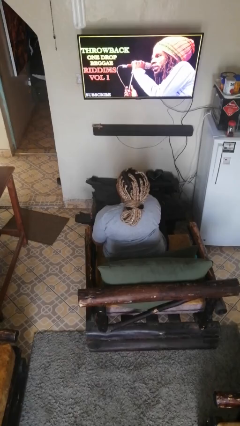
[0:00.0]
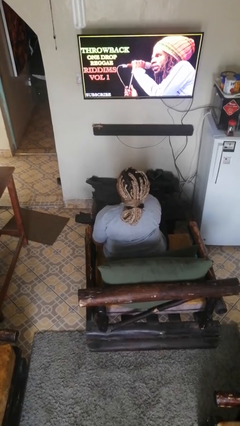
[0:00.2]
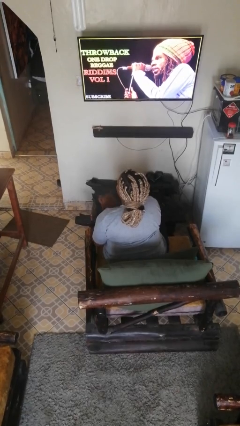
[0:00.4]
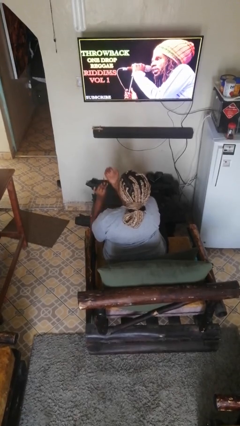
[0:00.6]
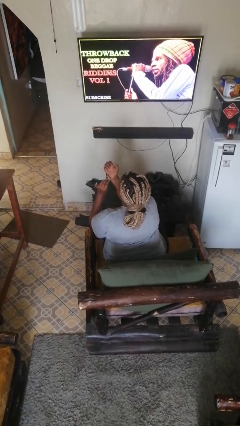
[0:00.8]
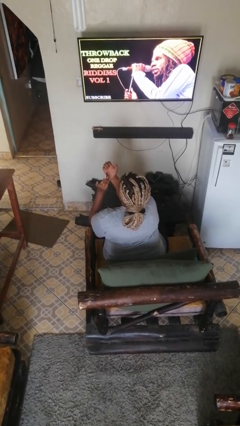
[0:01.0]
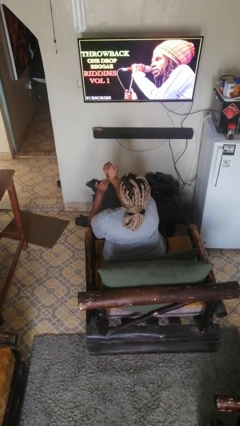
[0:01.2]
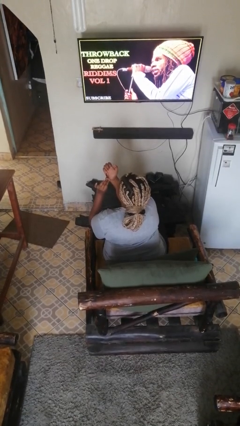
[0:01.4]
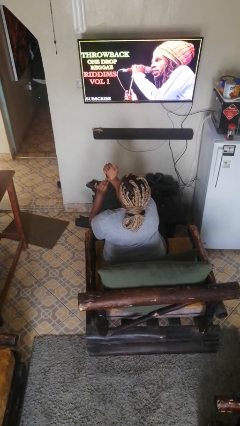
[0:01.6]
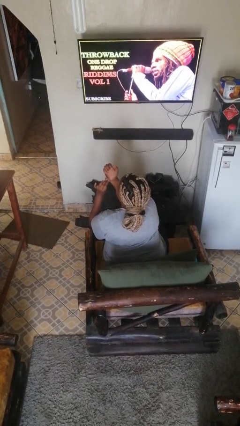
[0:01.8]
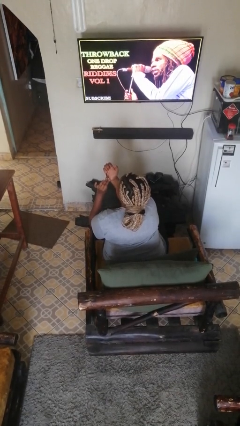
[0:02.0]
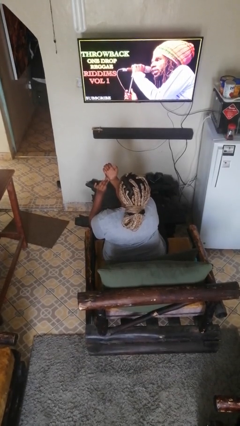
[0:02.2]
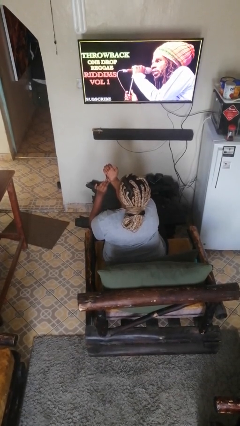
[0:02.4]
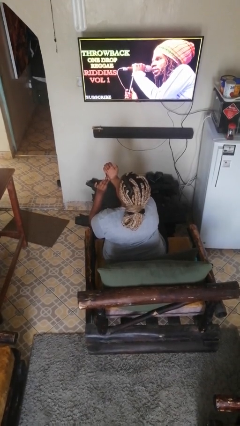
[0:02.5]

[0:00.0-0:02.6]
person paints fingernails

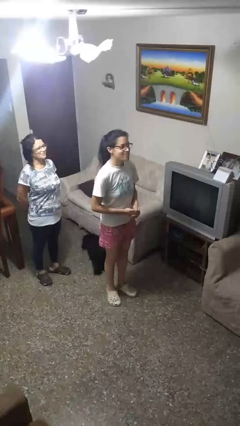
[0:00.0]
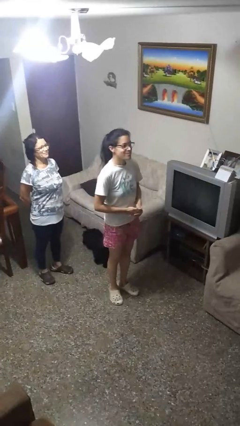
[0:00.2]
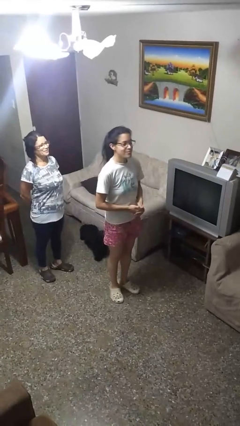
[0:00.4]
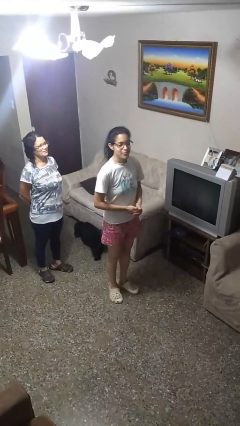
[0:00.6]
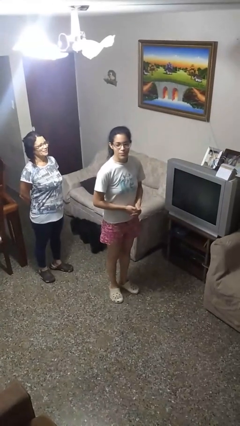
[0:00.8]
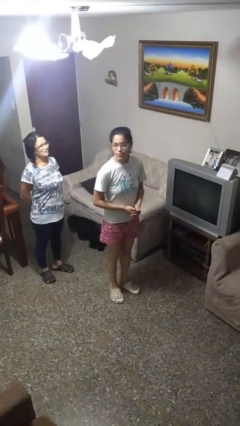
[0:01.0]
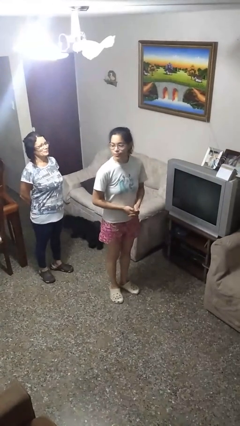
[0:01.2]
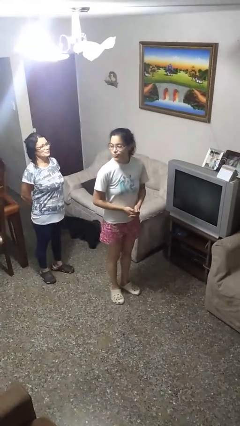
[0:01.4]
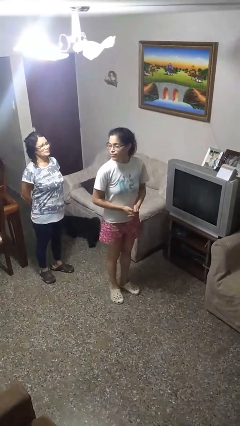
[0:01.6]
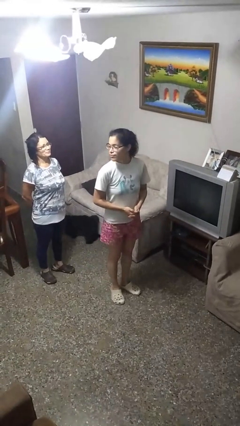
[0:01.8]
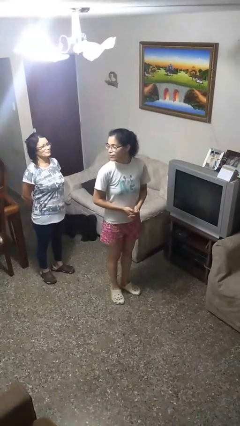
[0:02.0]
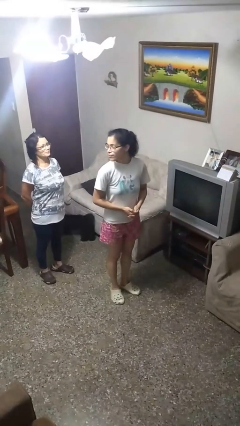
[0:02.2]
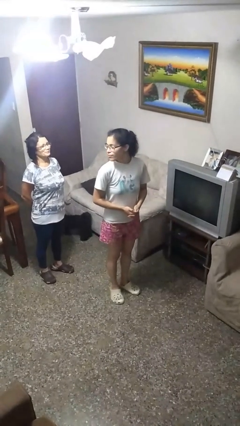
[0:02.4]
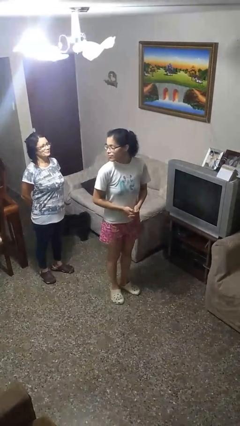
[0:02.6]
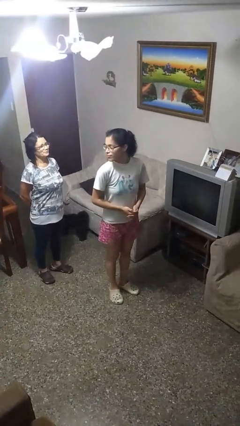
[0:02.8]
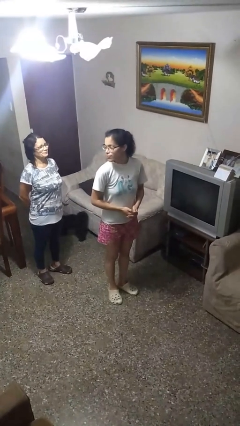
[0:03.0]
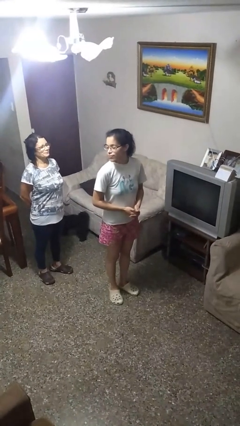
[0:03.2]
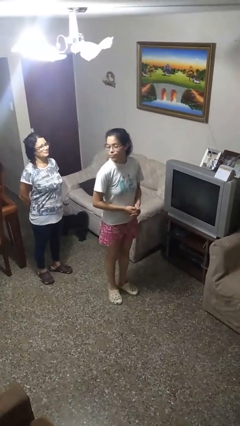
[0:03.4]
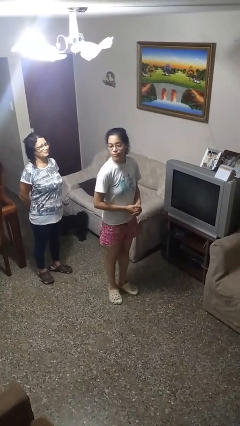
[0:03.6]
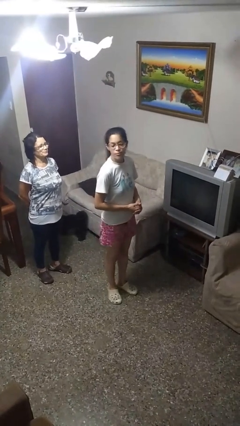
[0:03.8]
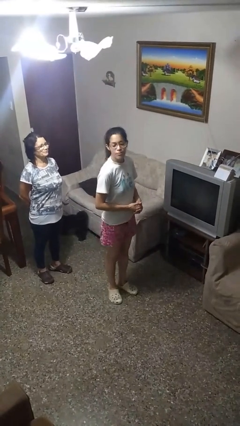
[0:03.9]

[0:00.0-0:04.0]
person looks over shoulder

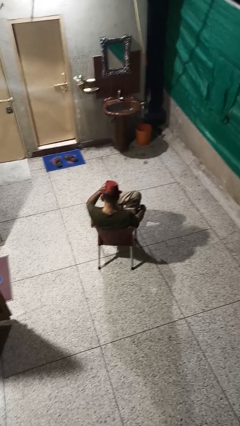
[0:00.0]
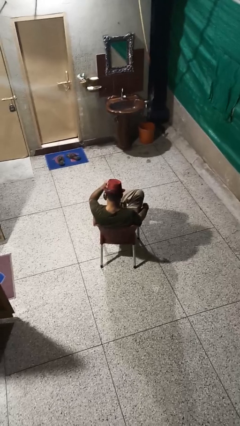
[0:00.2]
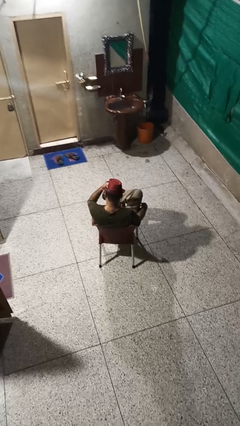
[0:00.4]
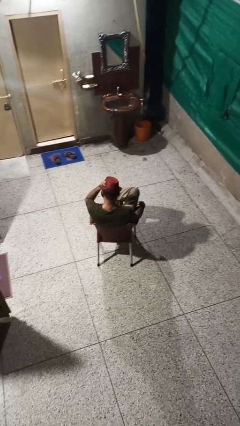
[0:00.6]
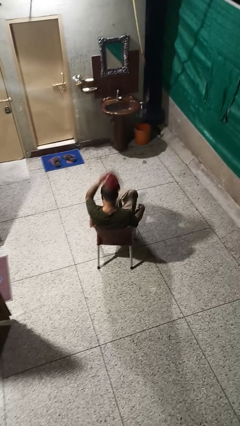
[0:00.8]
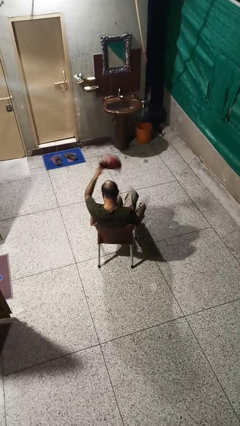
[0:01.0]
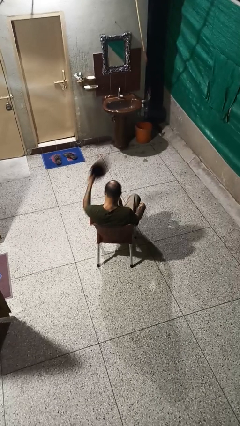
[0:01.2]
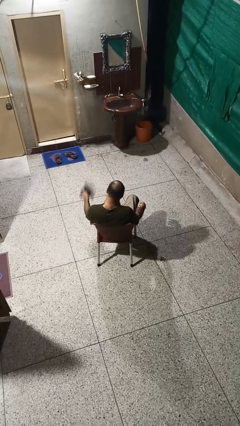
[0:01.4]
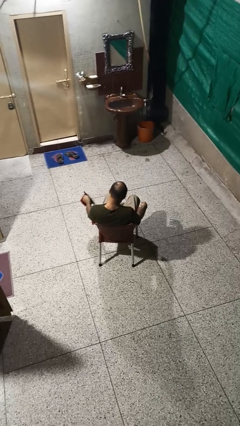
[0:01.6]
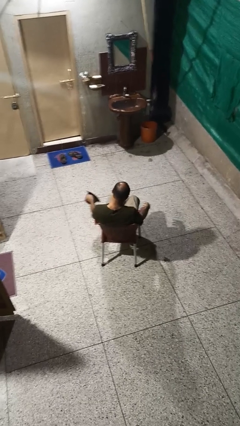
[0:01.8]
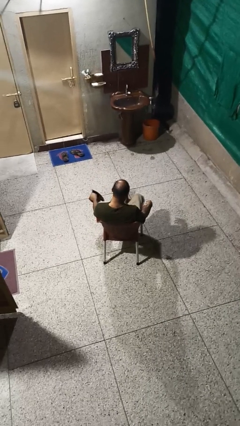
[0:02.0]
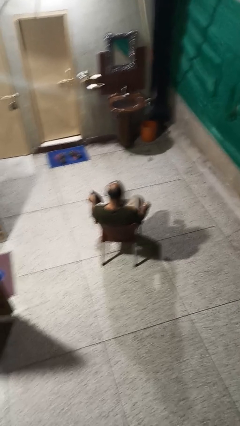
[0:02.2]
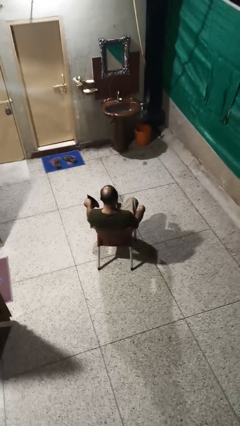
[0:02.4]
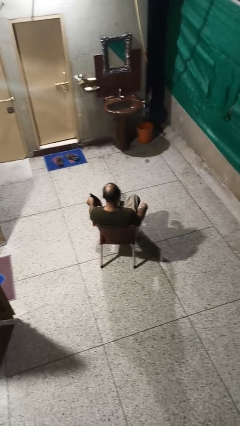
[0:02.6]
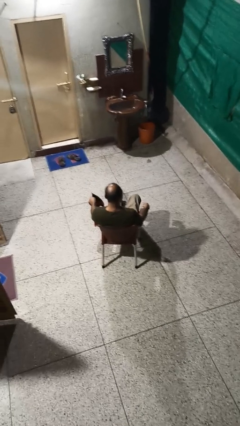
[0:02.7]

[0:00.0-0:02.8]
person takes off hat

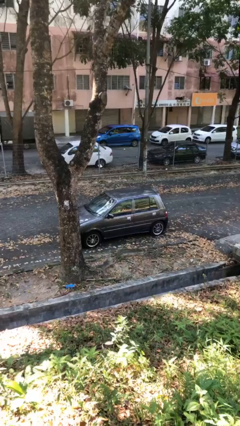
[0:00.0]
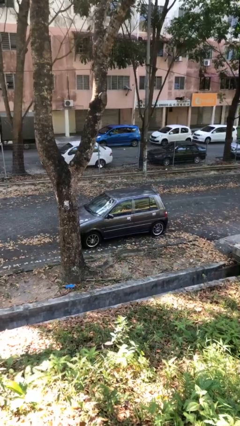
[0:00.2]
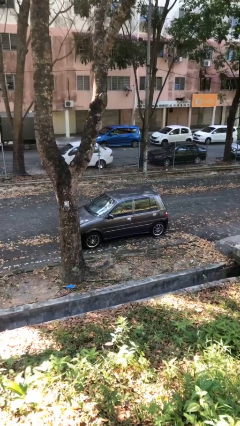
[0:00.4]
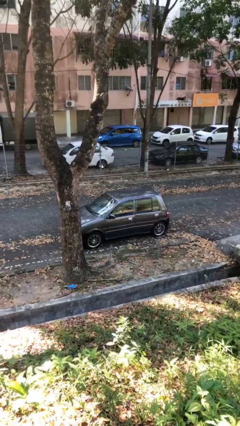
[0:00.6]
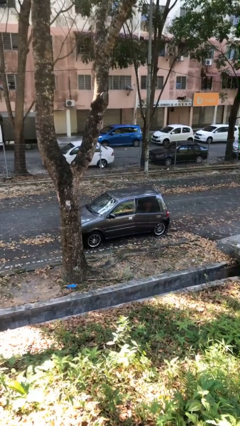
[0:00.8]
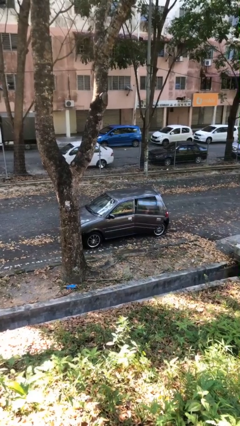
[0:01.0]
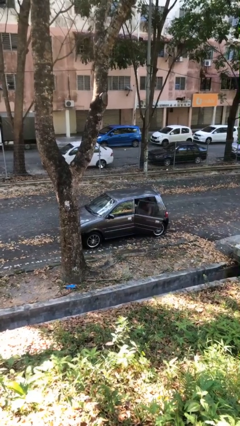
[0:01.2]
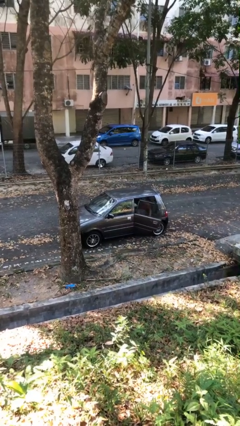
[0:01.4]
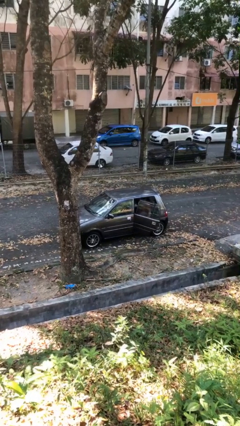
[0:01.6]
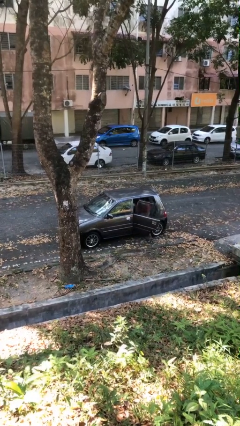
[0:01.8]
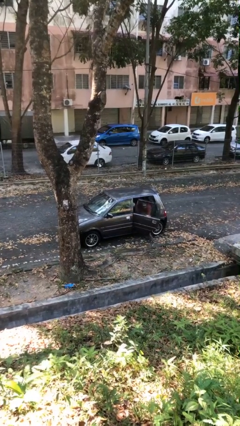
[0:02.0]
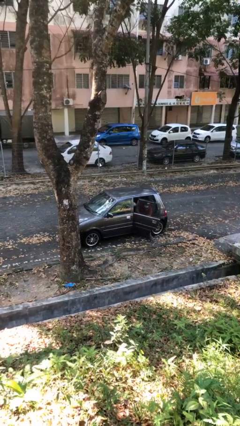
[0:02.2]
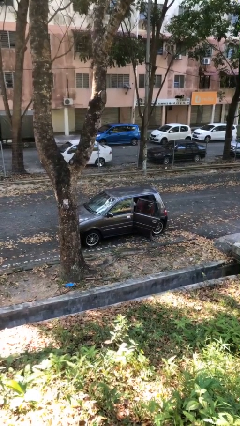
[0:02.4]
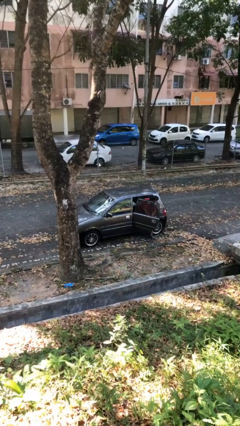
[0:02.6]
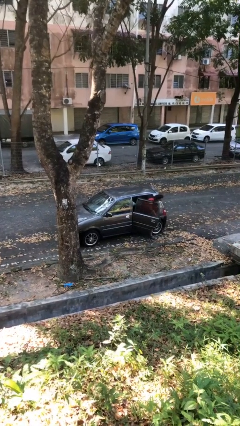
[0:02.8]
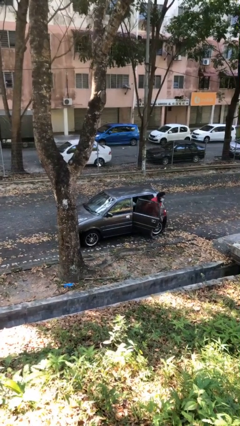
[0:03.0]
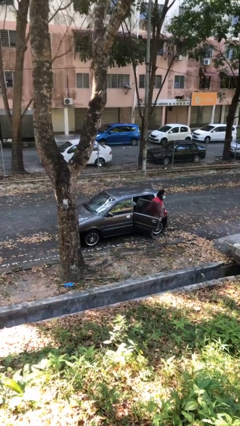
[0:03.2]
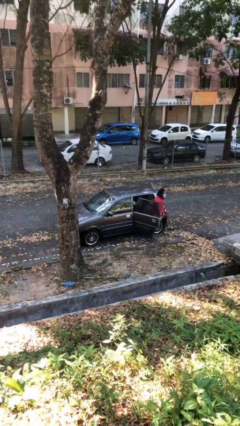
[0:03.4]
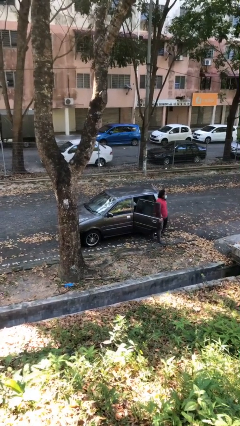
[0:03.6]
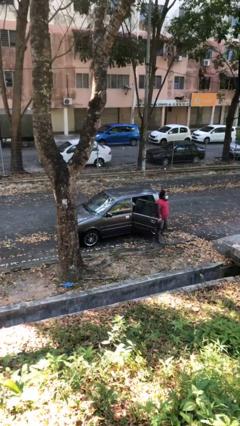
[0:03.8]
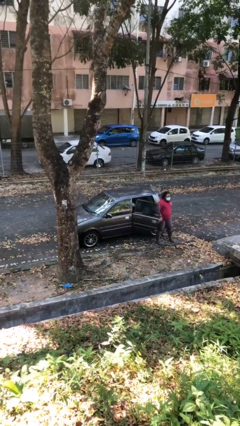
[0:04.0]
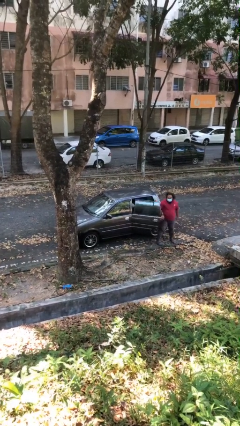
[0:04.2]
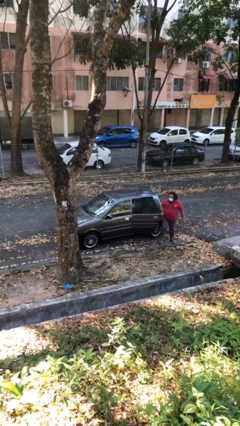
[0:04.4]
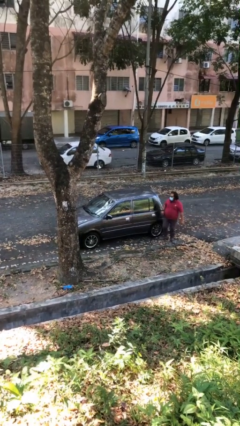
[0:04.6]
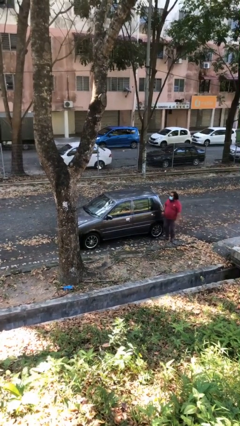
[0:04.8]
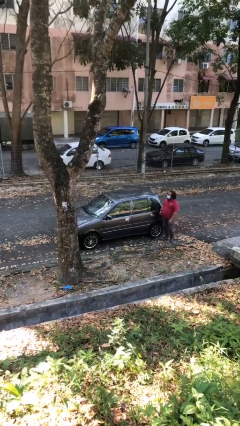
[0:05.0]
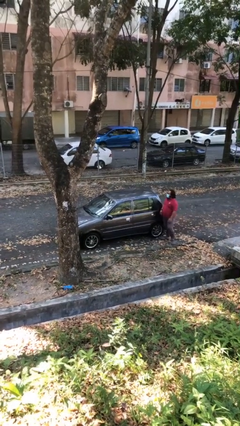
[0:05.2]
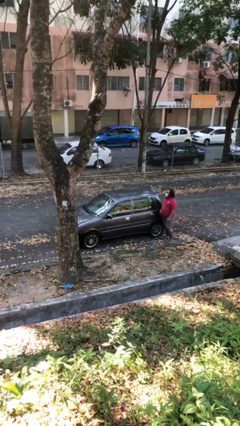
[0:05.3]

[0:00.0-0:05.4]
car drops off person

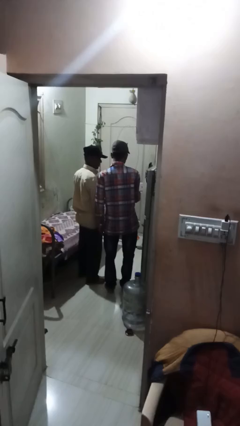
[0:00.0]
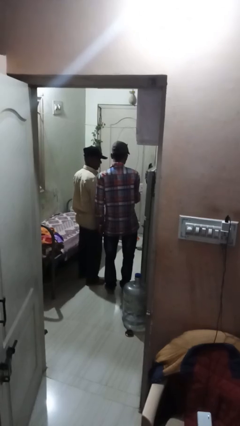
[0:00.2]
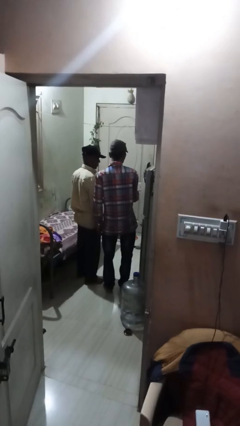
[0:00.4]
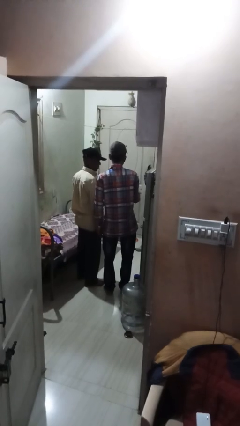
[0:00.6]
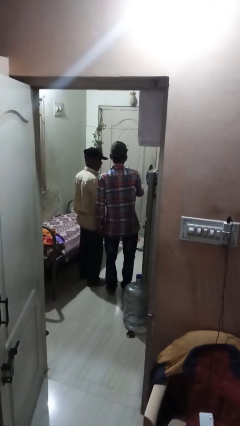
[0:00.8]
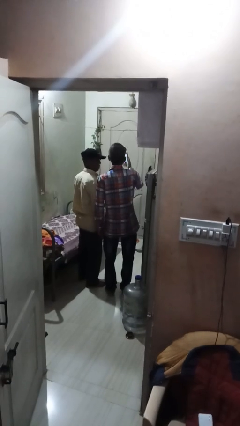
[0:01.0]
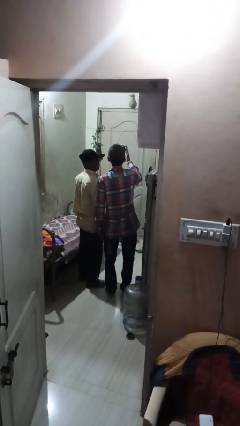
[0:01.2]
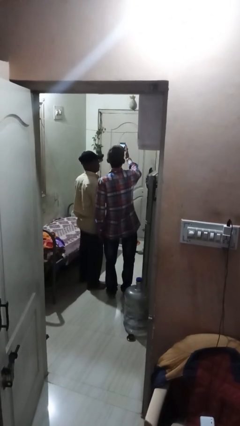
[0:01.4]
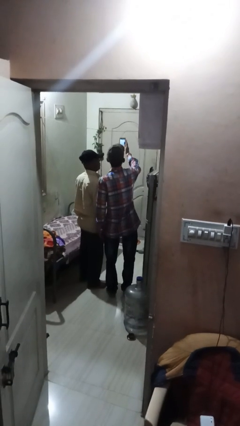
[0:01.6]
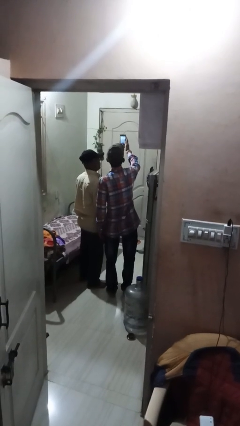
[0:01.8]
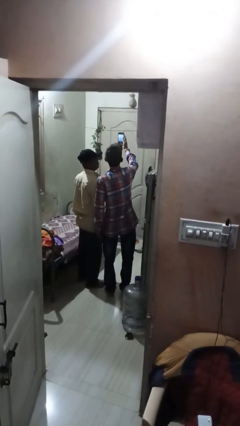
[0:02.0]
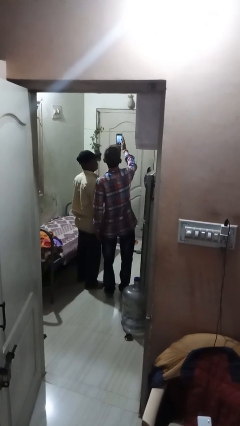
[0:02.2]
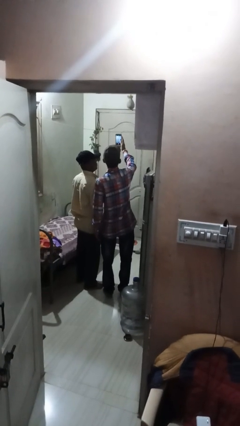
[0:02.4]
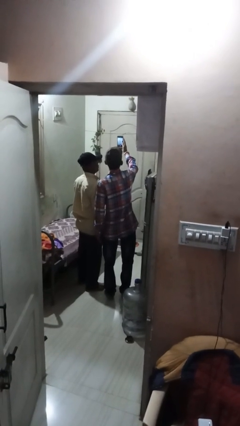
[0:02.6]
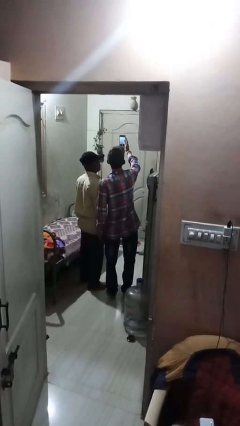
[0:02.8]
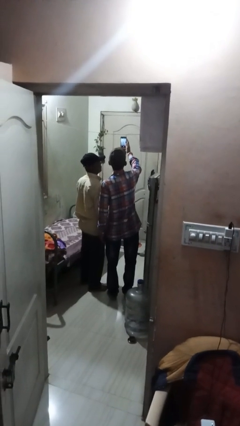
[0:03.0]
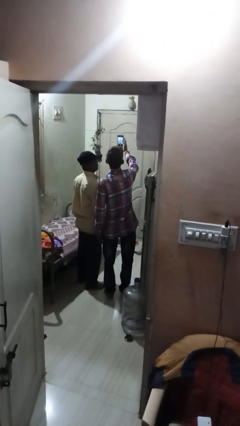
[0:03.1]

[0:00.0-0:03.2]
person takes selfie with person
